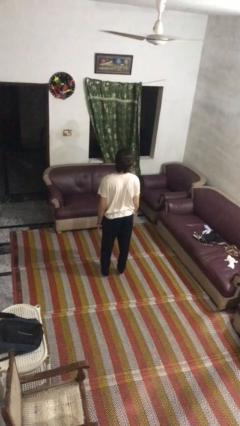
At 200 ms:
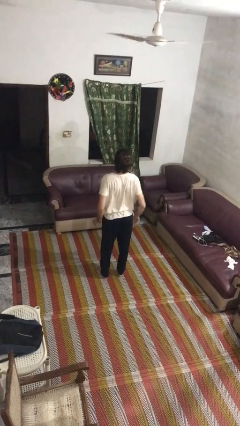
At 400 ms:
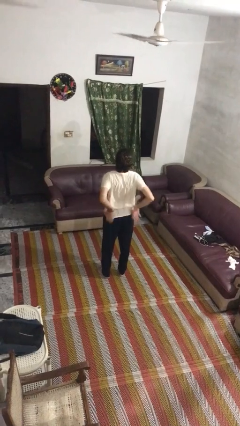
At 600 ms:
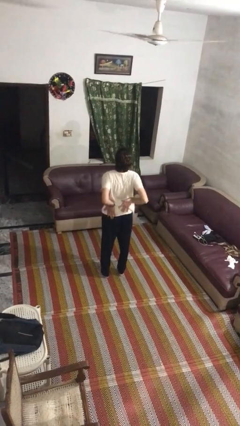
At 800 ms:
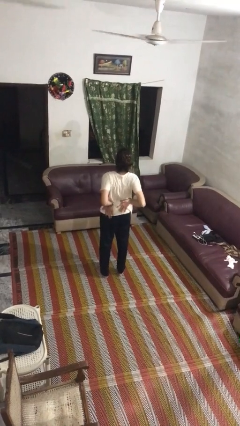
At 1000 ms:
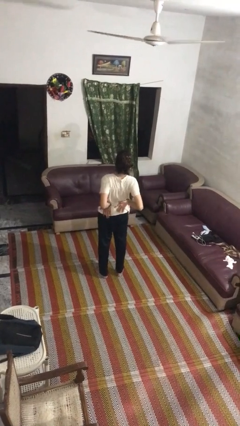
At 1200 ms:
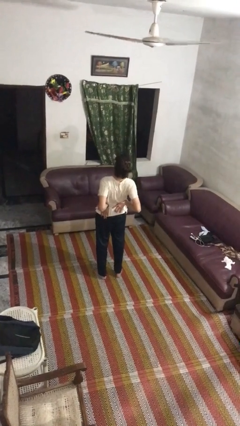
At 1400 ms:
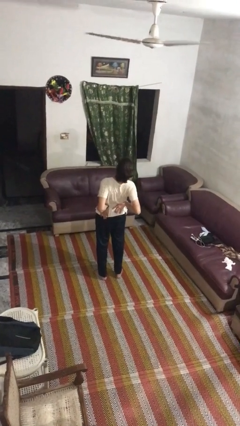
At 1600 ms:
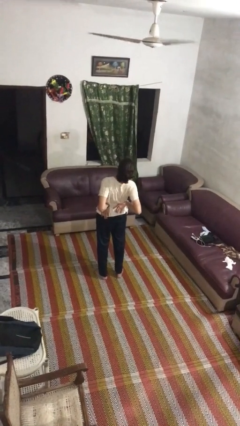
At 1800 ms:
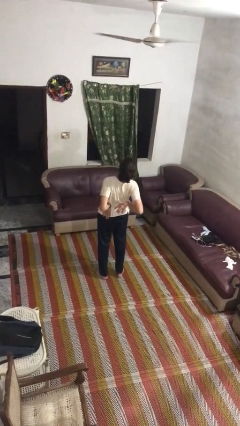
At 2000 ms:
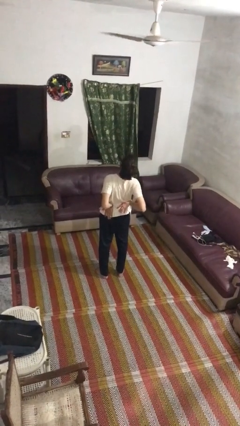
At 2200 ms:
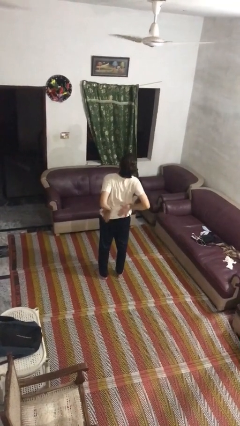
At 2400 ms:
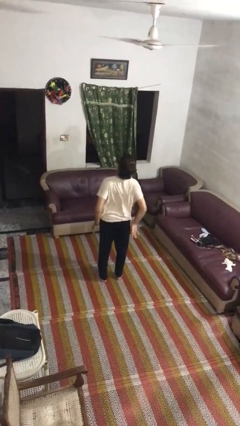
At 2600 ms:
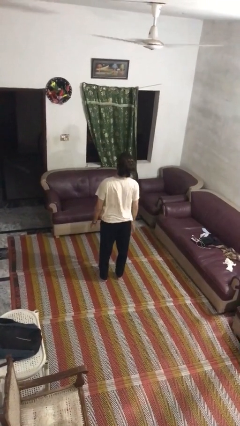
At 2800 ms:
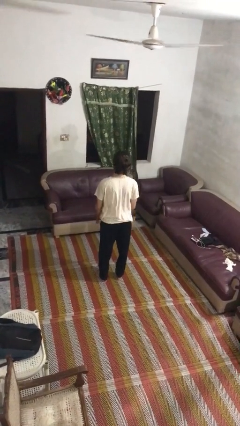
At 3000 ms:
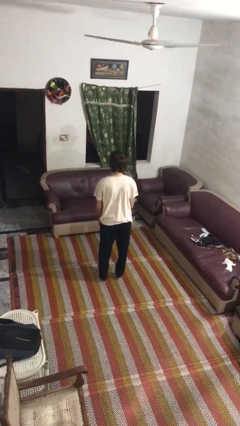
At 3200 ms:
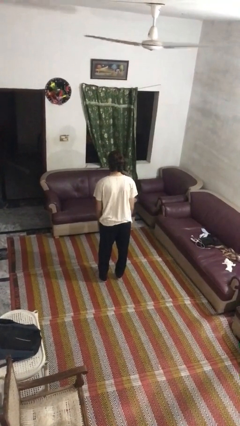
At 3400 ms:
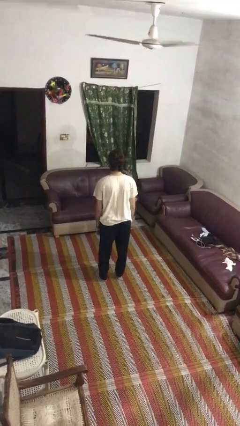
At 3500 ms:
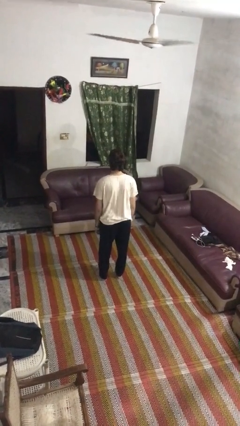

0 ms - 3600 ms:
person stretches back

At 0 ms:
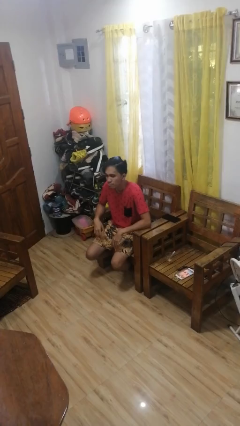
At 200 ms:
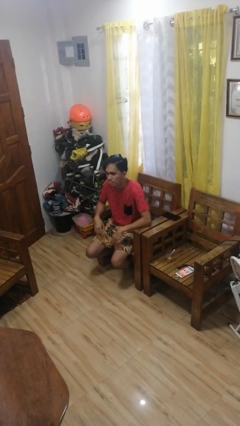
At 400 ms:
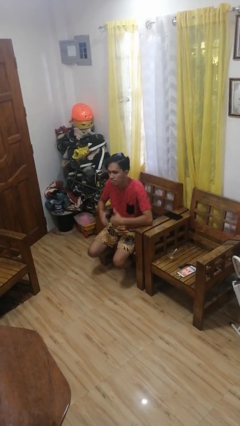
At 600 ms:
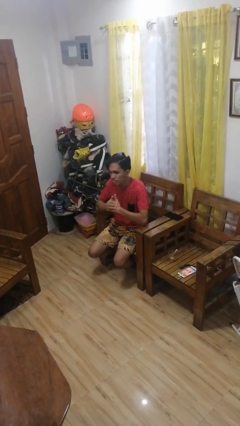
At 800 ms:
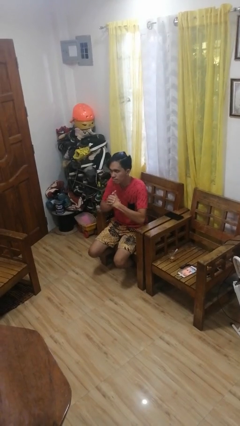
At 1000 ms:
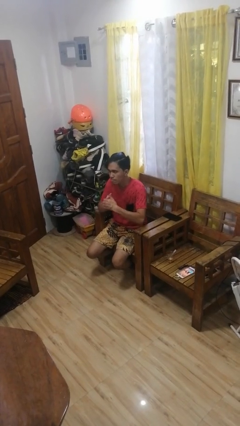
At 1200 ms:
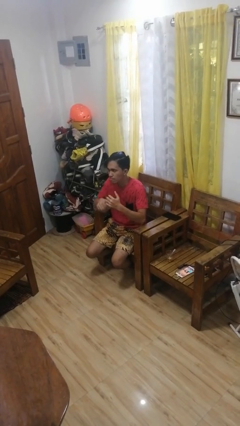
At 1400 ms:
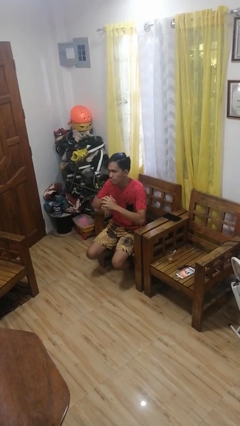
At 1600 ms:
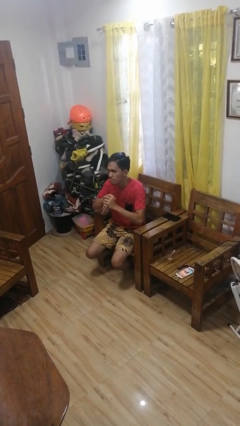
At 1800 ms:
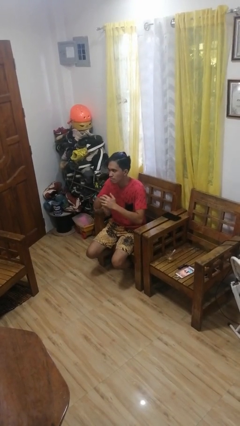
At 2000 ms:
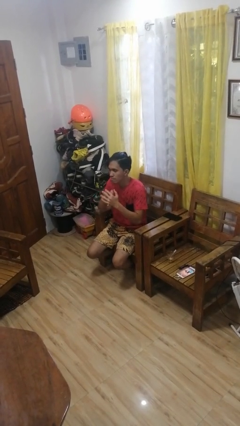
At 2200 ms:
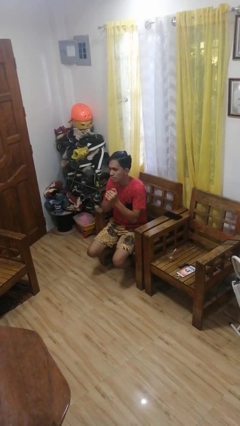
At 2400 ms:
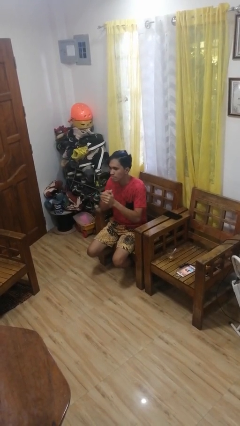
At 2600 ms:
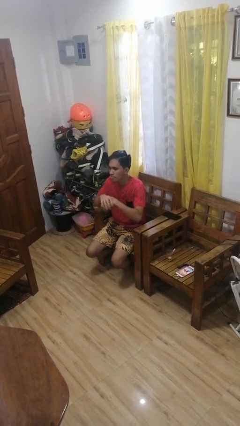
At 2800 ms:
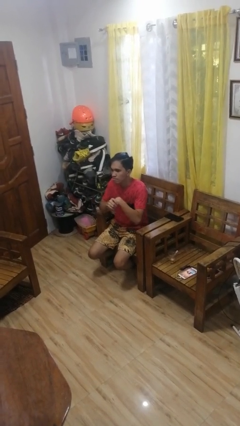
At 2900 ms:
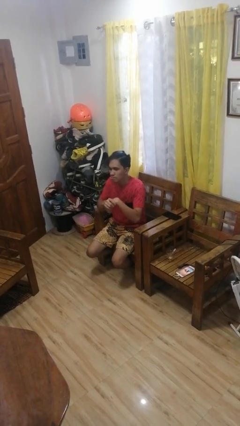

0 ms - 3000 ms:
person cracks knuckles

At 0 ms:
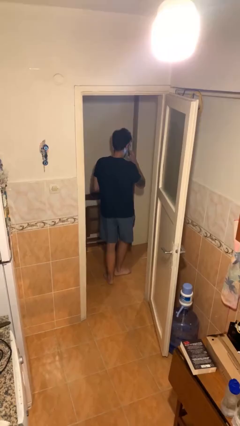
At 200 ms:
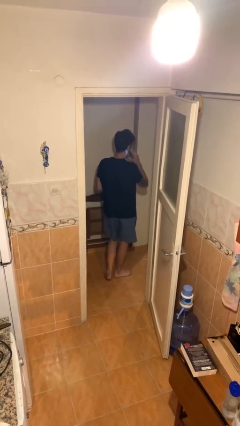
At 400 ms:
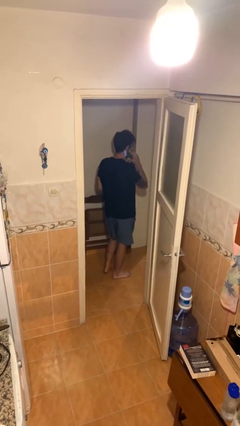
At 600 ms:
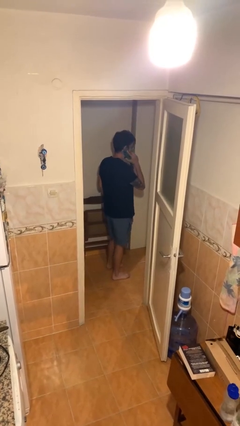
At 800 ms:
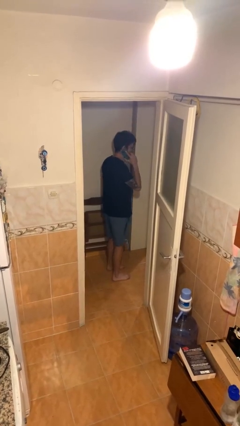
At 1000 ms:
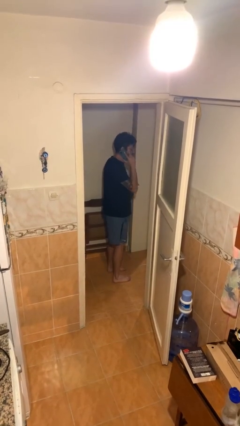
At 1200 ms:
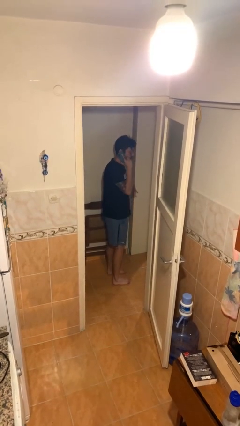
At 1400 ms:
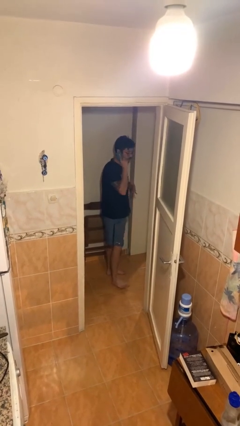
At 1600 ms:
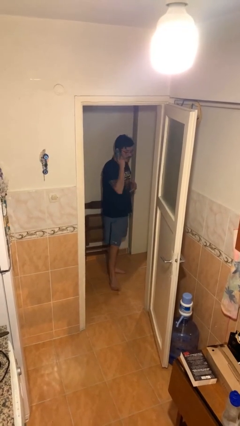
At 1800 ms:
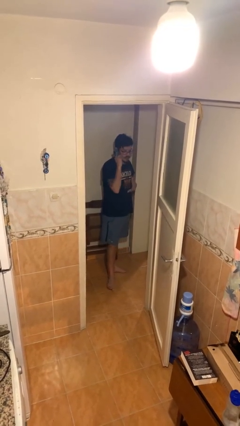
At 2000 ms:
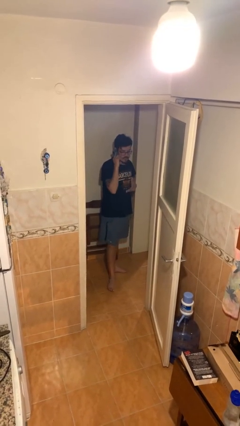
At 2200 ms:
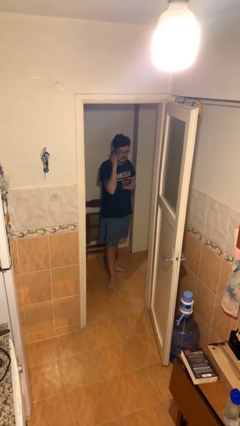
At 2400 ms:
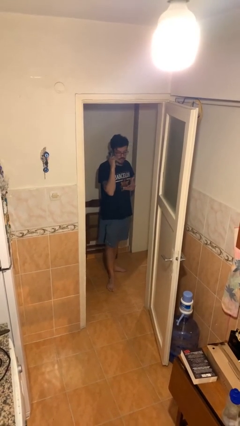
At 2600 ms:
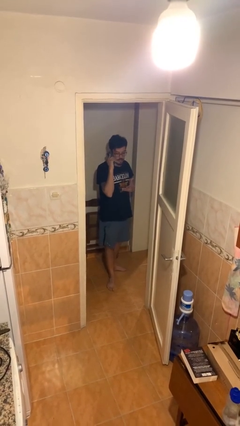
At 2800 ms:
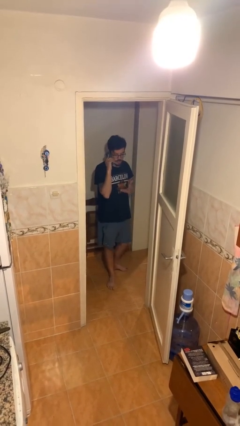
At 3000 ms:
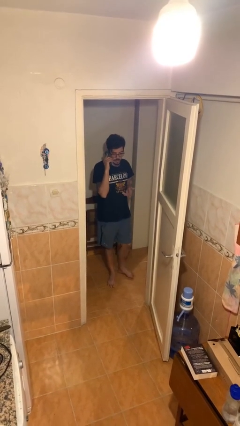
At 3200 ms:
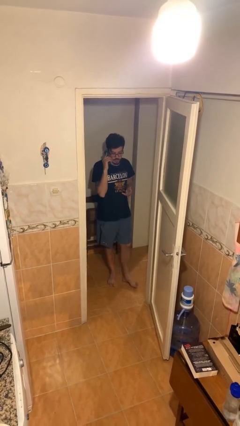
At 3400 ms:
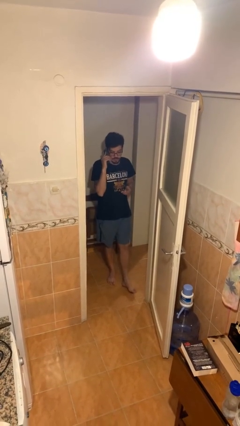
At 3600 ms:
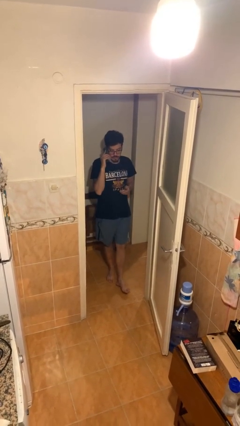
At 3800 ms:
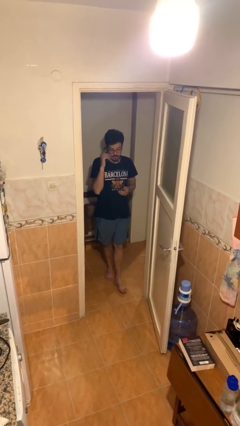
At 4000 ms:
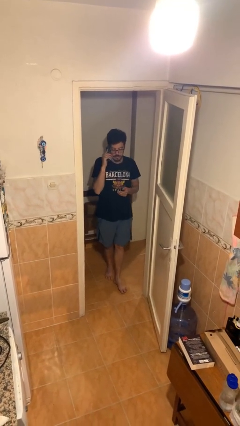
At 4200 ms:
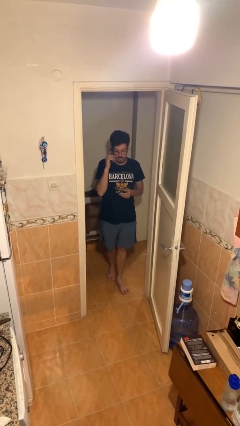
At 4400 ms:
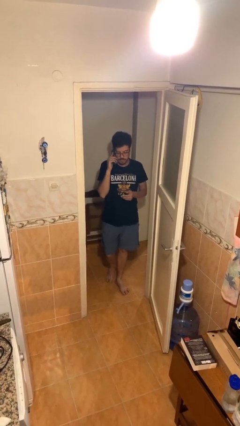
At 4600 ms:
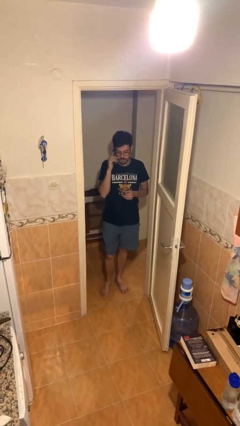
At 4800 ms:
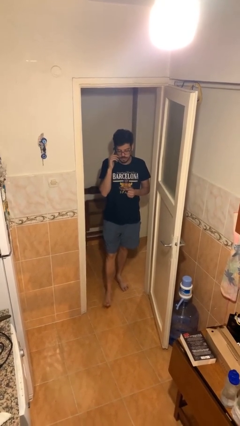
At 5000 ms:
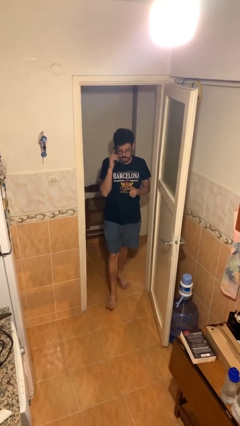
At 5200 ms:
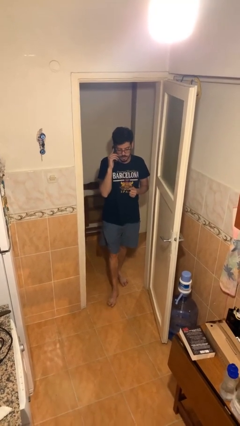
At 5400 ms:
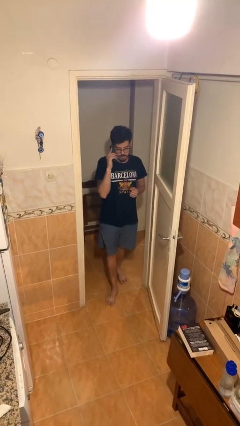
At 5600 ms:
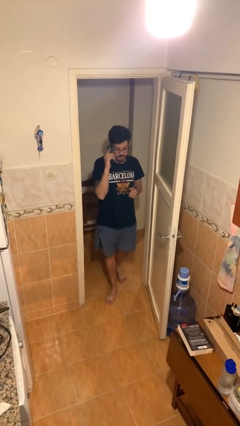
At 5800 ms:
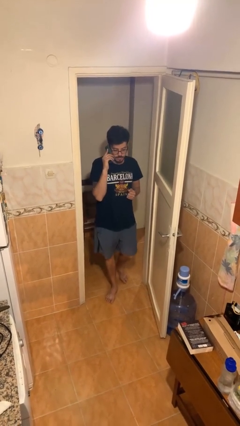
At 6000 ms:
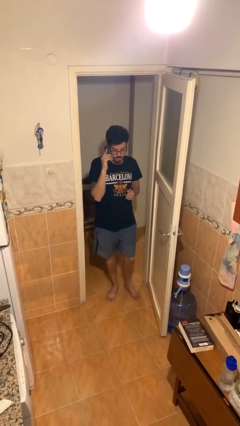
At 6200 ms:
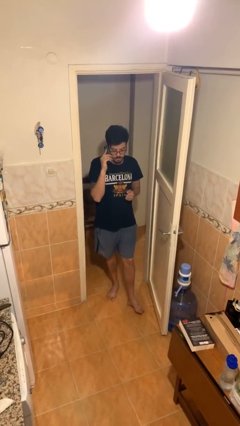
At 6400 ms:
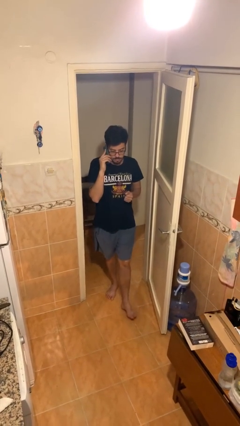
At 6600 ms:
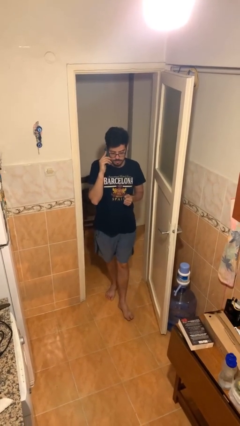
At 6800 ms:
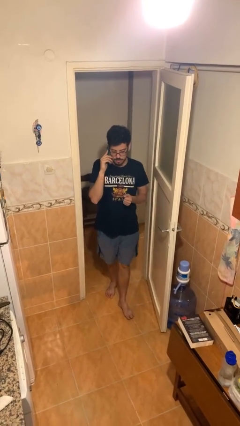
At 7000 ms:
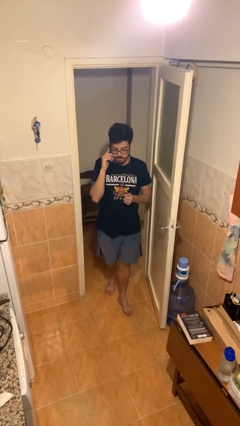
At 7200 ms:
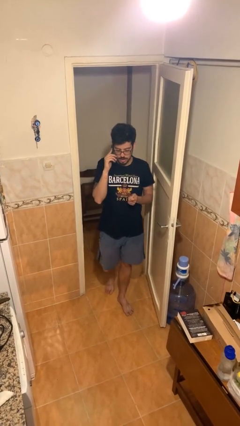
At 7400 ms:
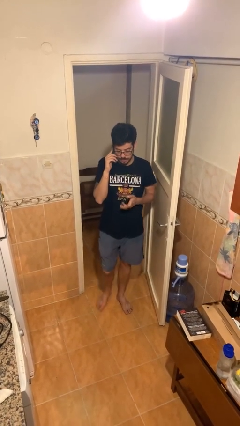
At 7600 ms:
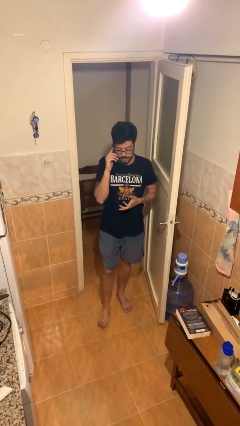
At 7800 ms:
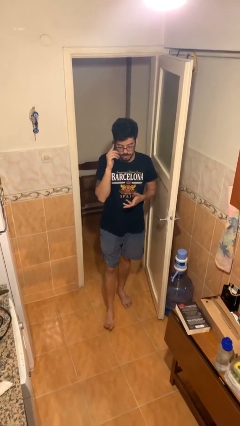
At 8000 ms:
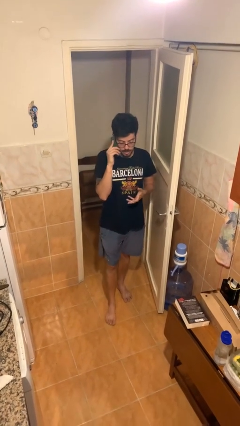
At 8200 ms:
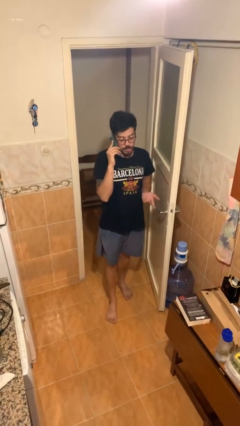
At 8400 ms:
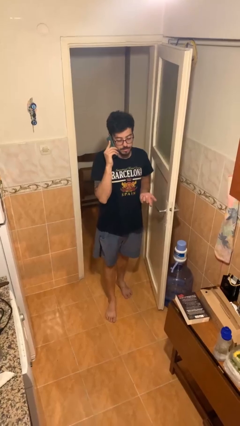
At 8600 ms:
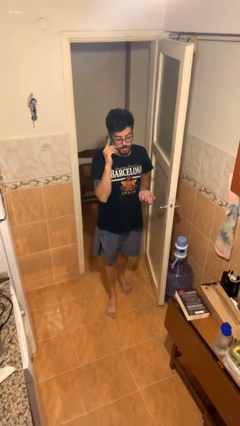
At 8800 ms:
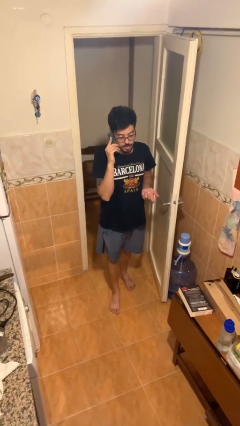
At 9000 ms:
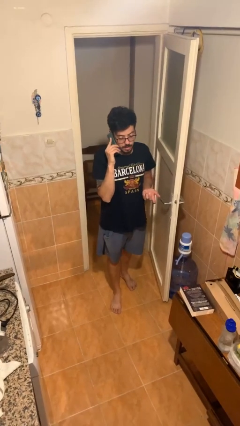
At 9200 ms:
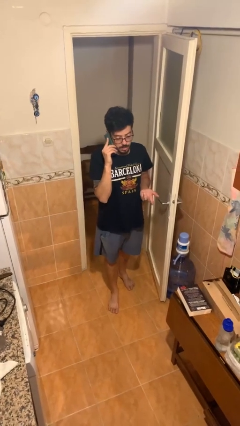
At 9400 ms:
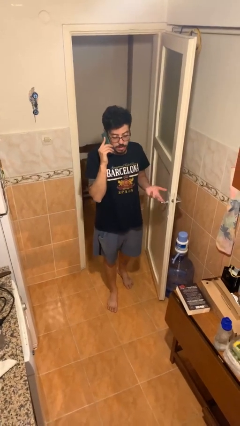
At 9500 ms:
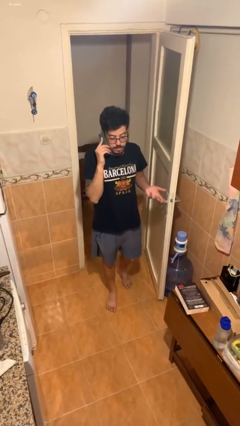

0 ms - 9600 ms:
person talks on phone

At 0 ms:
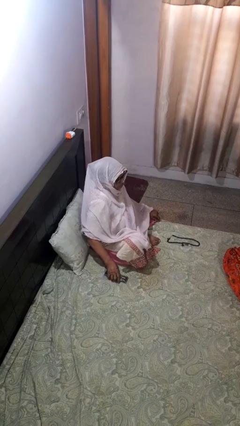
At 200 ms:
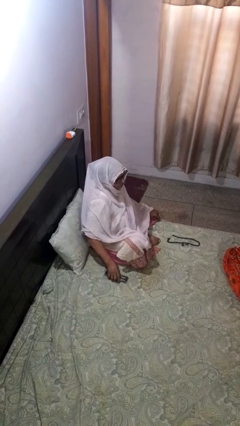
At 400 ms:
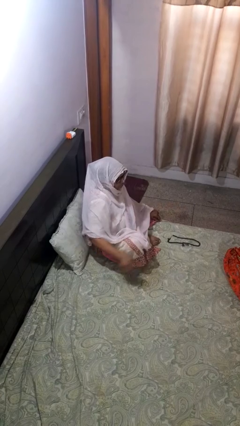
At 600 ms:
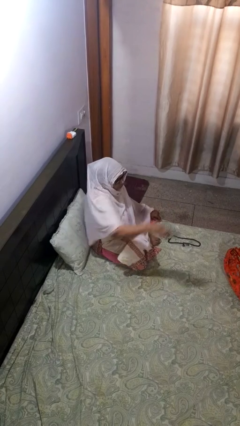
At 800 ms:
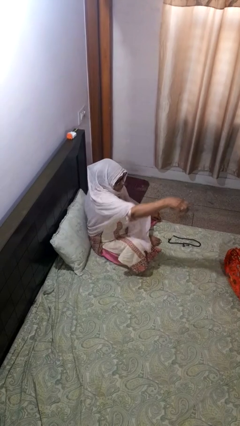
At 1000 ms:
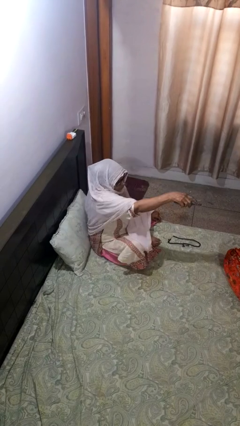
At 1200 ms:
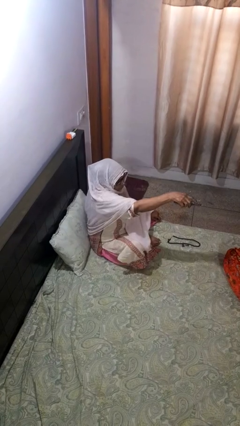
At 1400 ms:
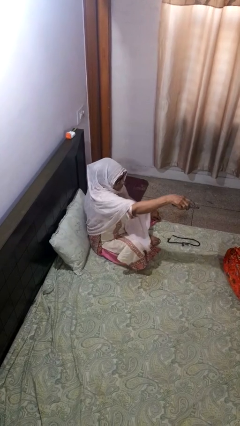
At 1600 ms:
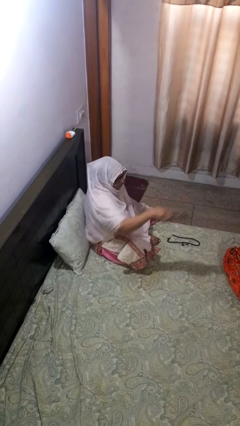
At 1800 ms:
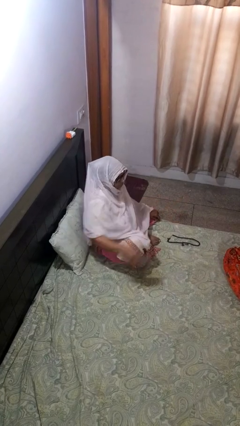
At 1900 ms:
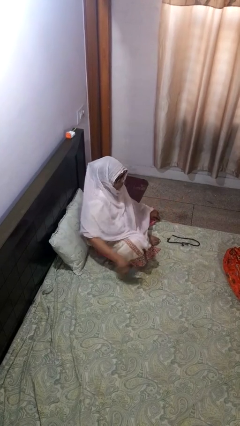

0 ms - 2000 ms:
person uses television remote
